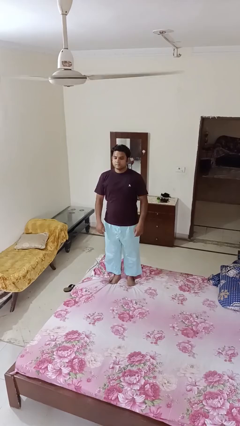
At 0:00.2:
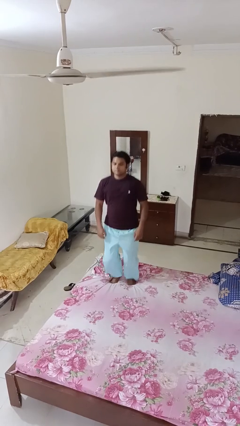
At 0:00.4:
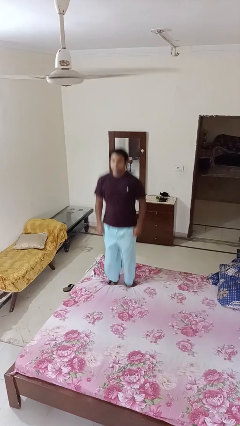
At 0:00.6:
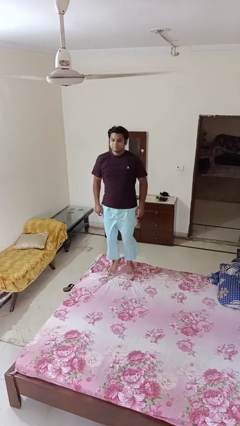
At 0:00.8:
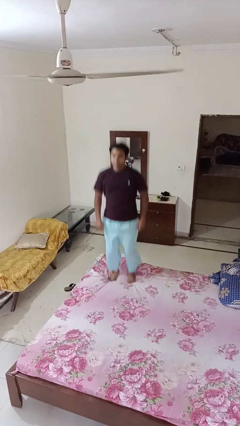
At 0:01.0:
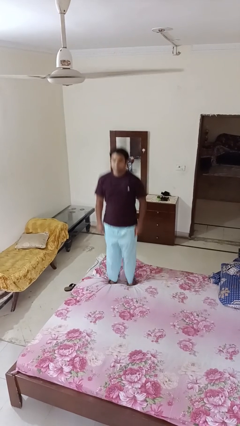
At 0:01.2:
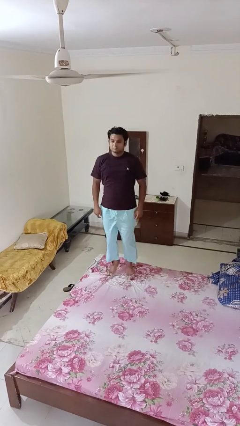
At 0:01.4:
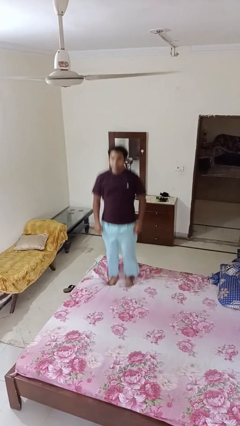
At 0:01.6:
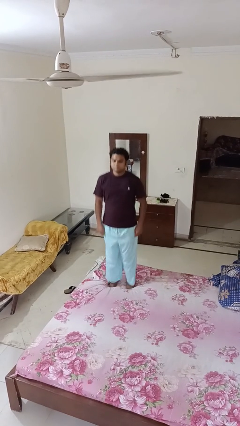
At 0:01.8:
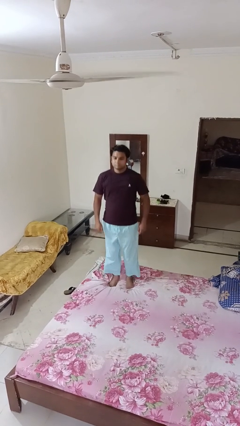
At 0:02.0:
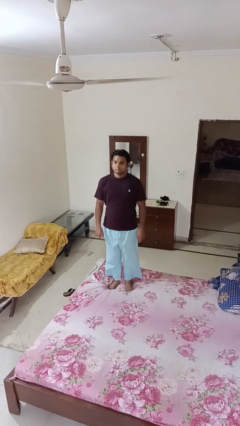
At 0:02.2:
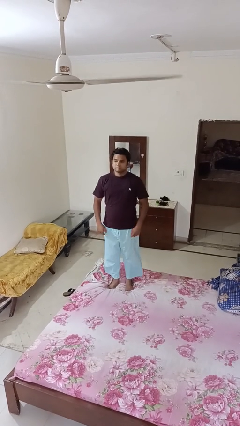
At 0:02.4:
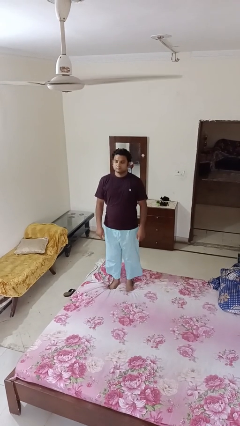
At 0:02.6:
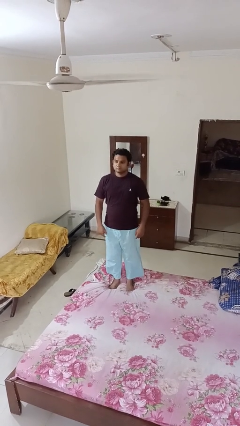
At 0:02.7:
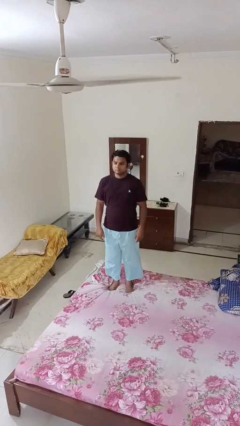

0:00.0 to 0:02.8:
person jumps on bed

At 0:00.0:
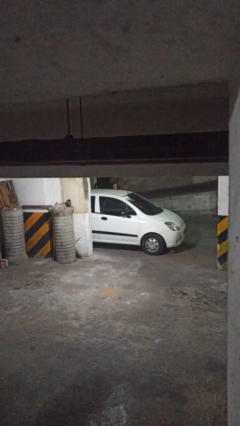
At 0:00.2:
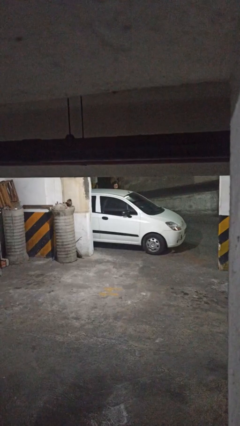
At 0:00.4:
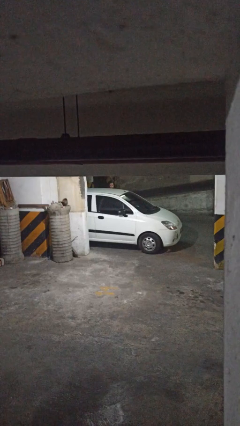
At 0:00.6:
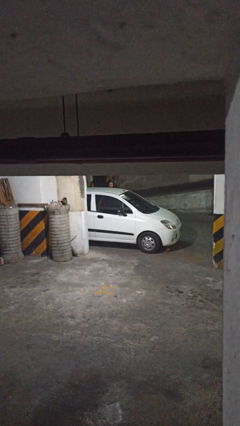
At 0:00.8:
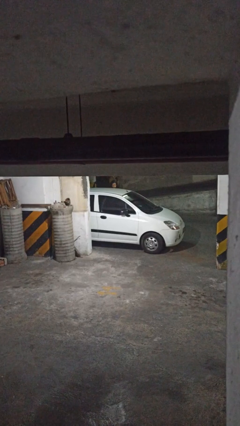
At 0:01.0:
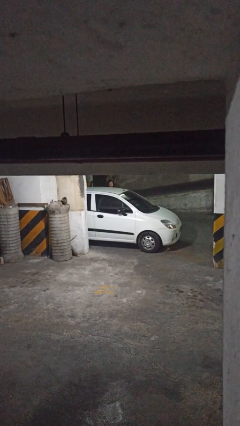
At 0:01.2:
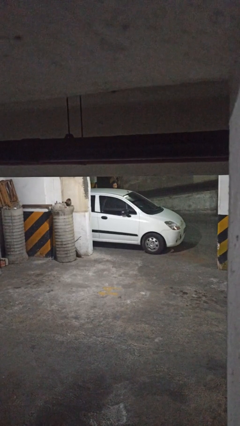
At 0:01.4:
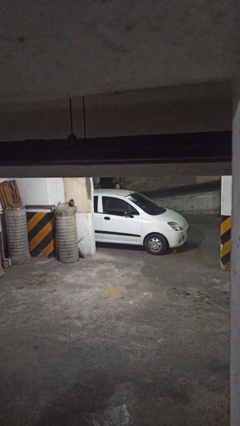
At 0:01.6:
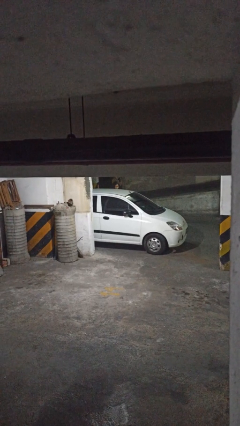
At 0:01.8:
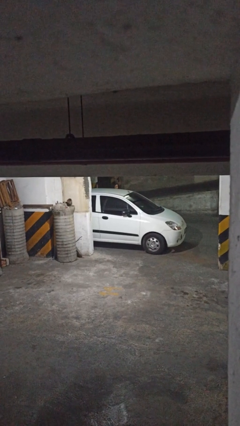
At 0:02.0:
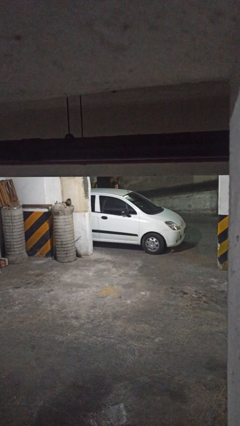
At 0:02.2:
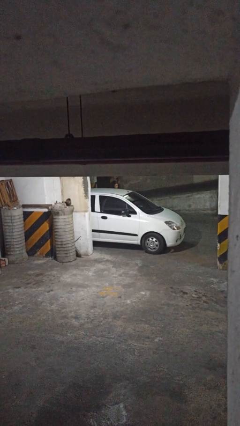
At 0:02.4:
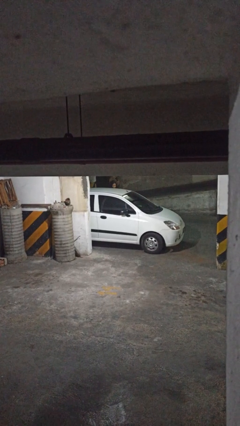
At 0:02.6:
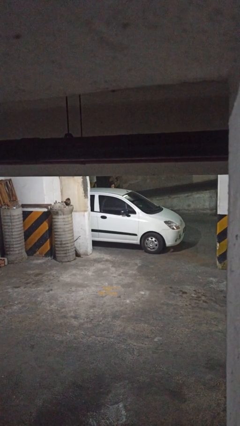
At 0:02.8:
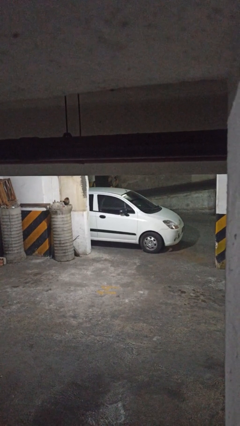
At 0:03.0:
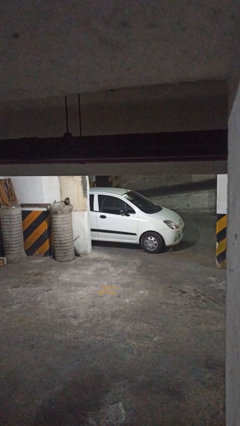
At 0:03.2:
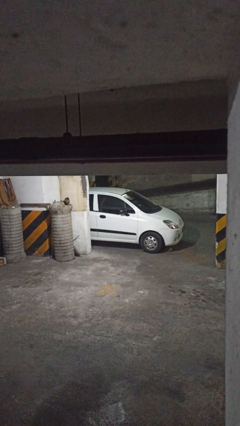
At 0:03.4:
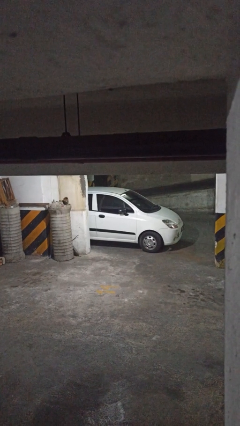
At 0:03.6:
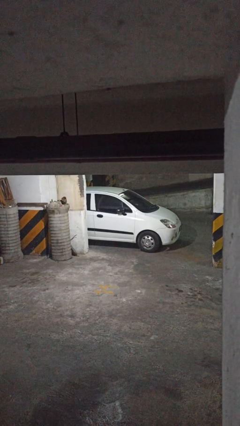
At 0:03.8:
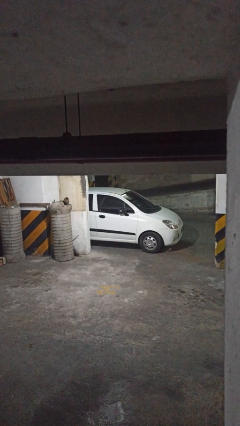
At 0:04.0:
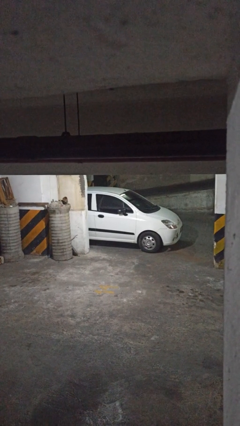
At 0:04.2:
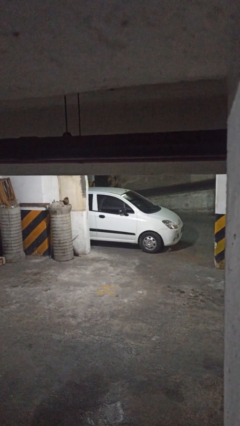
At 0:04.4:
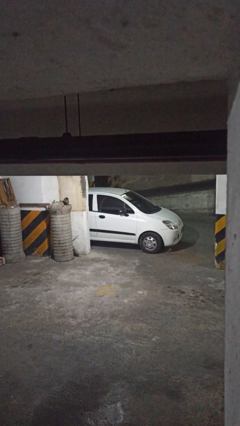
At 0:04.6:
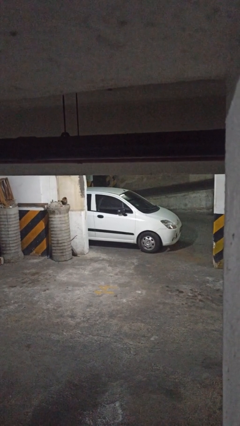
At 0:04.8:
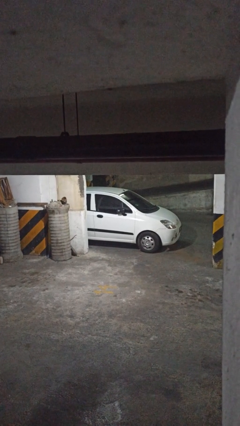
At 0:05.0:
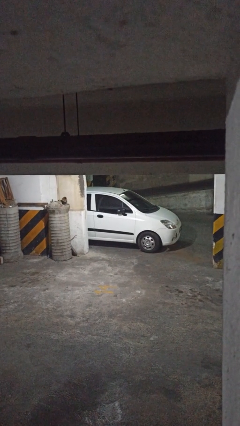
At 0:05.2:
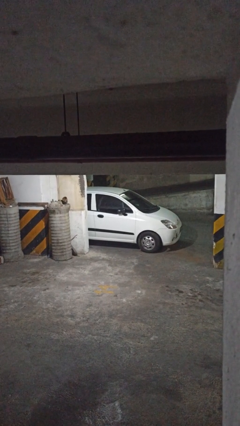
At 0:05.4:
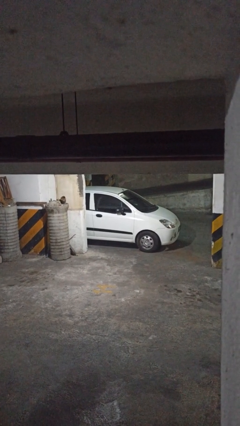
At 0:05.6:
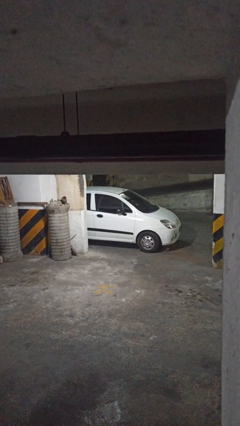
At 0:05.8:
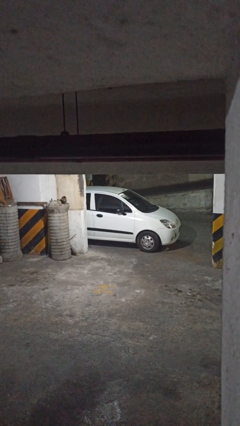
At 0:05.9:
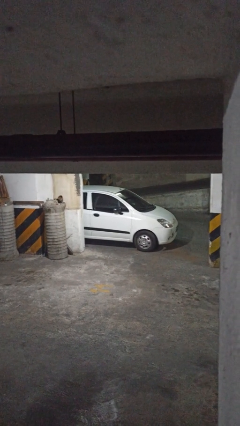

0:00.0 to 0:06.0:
car picks up person

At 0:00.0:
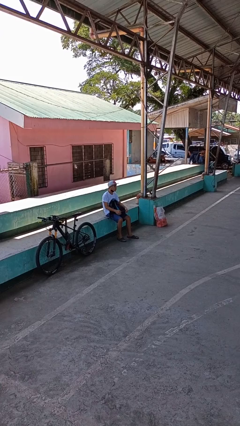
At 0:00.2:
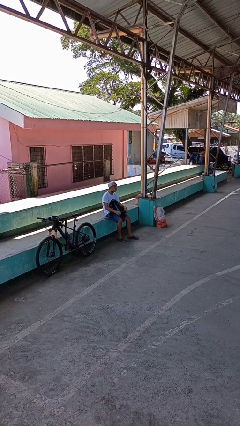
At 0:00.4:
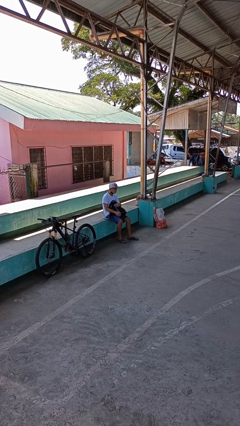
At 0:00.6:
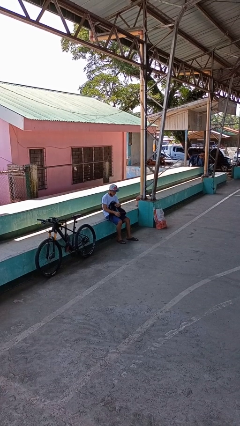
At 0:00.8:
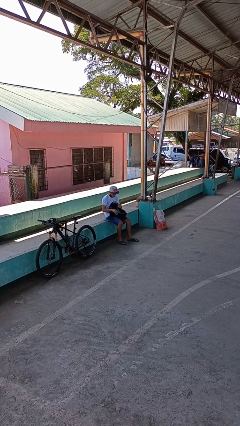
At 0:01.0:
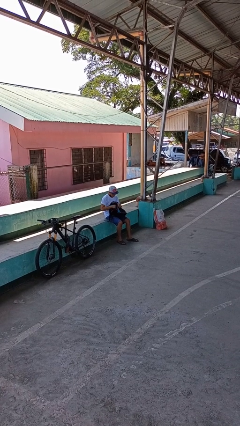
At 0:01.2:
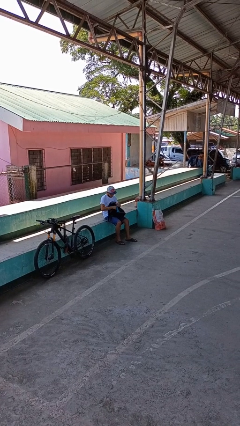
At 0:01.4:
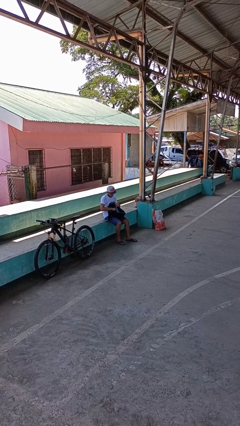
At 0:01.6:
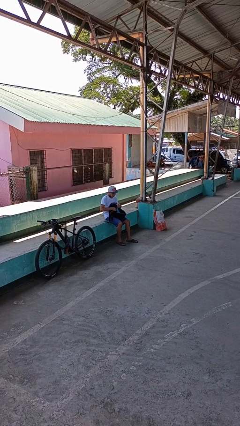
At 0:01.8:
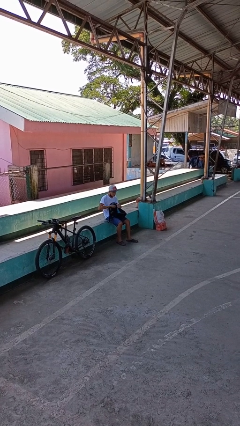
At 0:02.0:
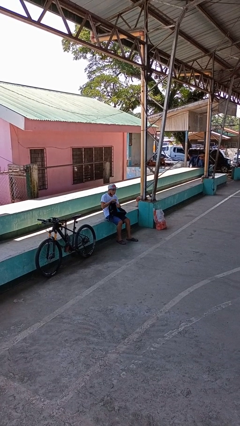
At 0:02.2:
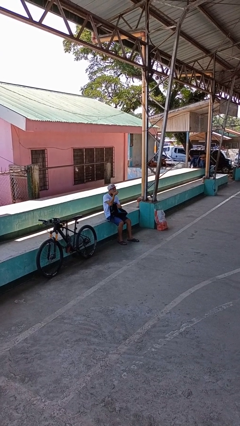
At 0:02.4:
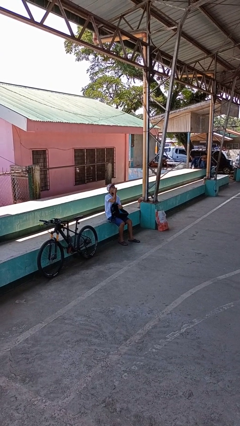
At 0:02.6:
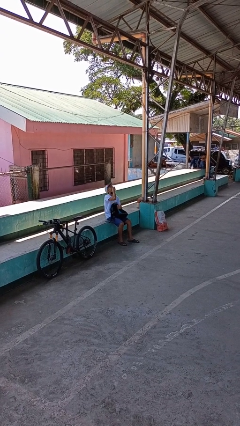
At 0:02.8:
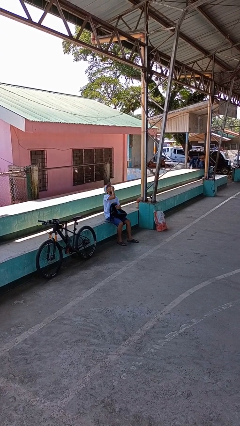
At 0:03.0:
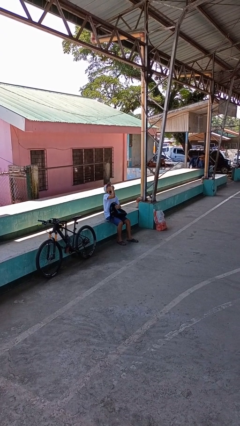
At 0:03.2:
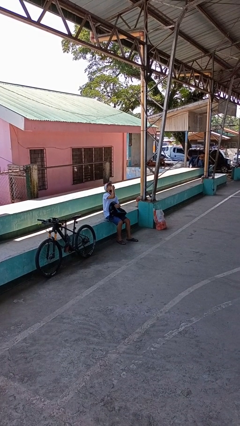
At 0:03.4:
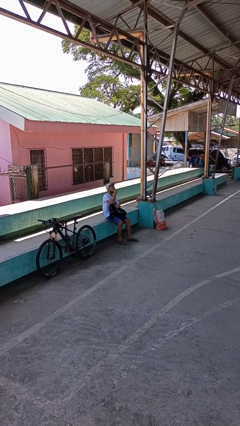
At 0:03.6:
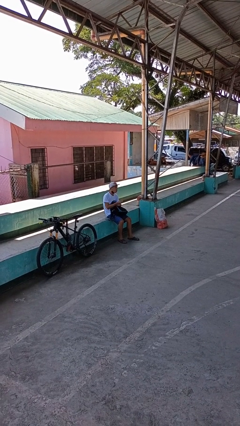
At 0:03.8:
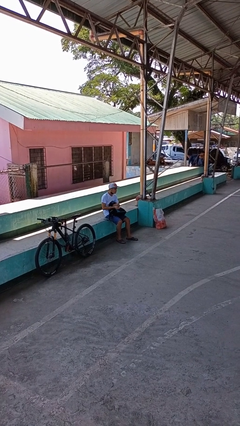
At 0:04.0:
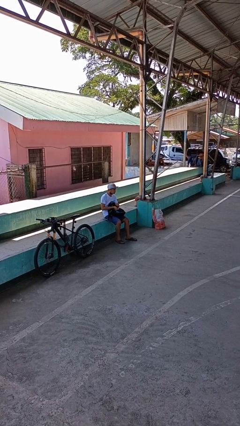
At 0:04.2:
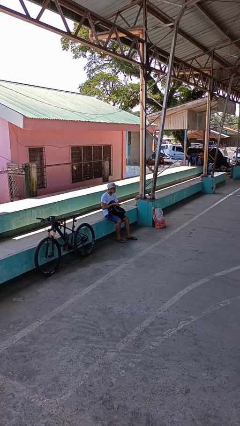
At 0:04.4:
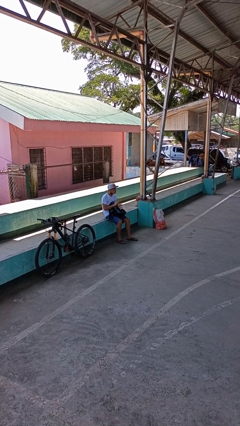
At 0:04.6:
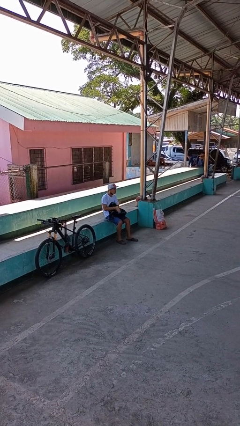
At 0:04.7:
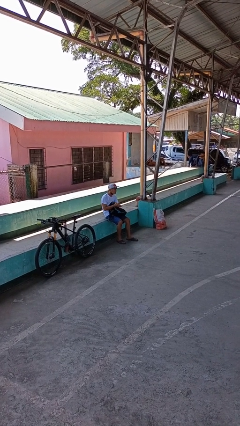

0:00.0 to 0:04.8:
person eats snack from bag

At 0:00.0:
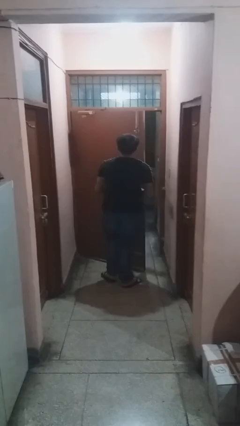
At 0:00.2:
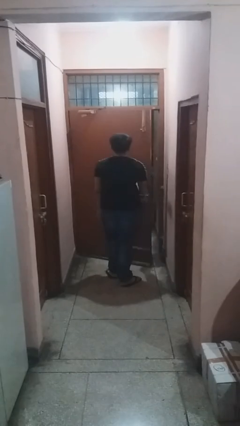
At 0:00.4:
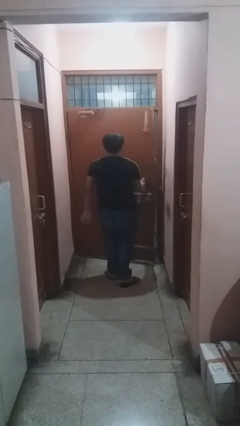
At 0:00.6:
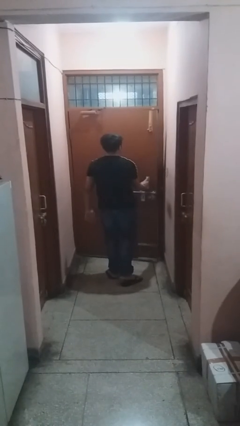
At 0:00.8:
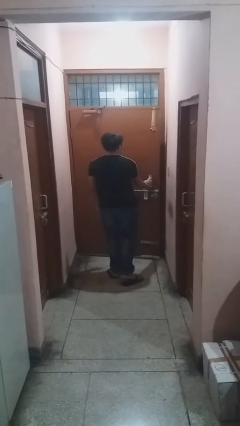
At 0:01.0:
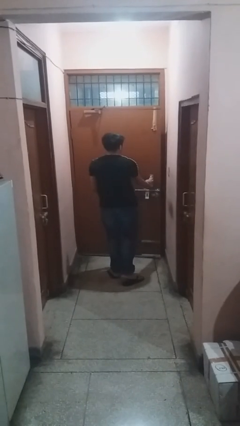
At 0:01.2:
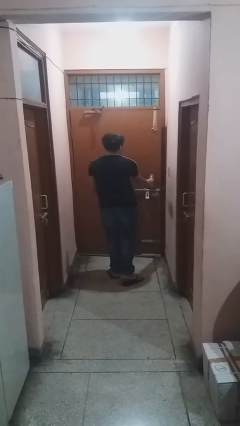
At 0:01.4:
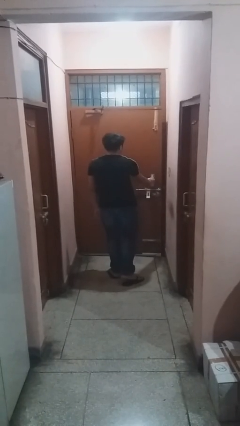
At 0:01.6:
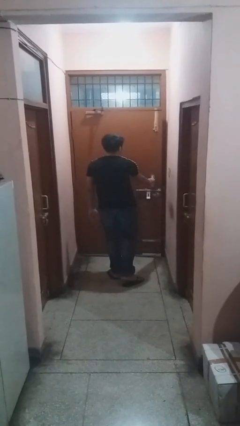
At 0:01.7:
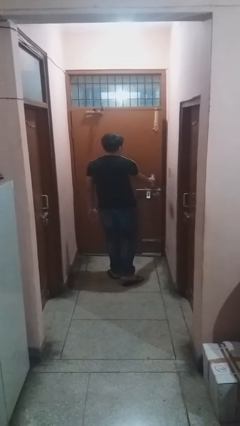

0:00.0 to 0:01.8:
person closes facility door

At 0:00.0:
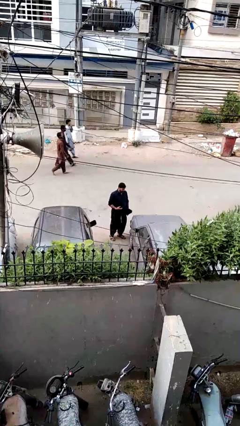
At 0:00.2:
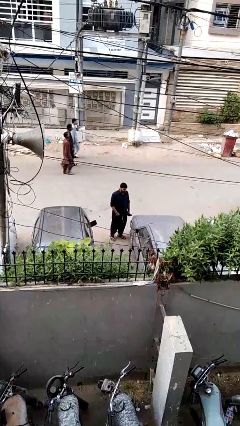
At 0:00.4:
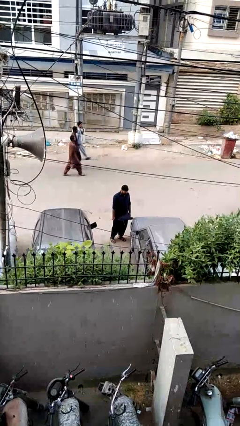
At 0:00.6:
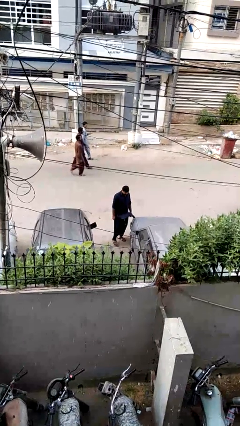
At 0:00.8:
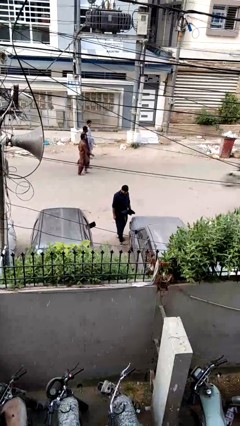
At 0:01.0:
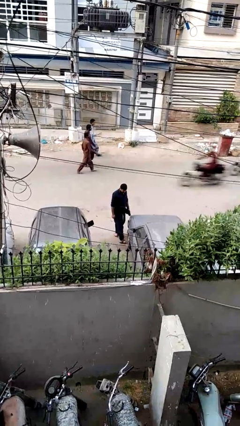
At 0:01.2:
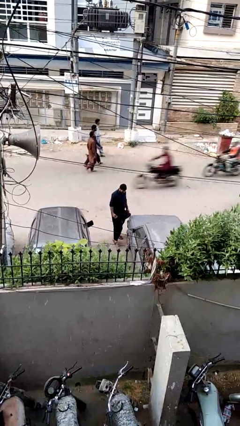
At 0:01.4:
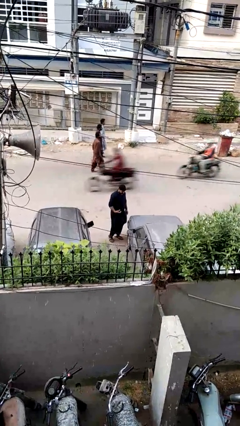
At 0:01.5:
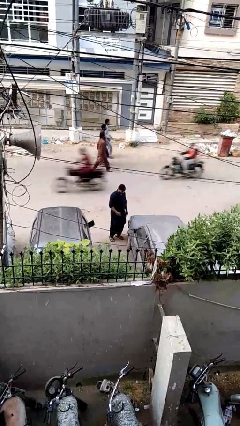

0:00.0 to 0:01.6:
person kicks car tires

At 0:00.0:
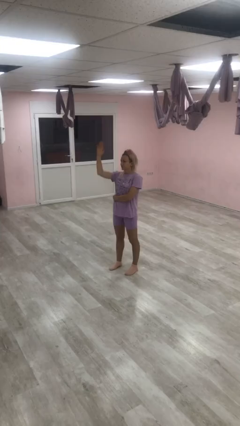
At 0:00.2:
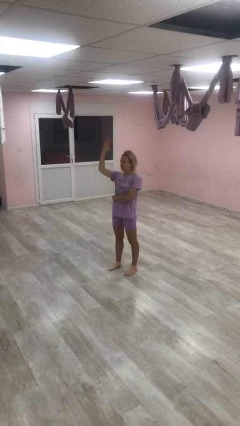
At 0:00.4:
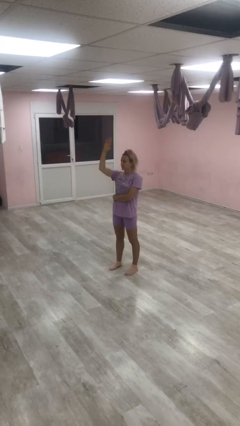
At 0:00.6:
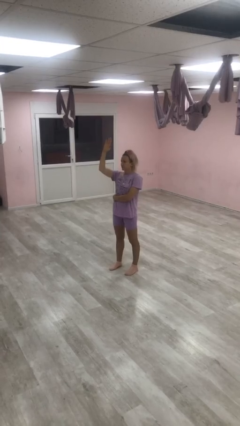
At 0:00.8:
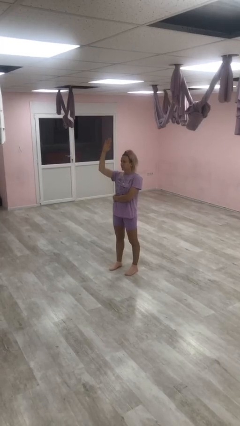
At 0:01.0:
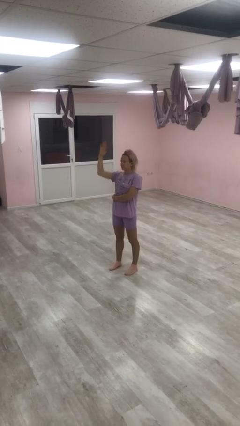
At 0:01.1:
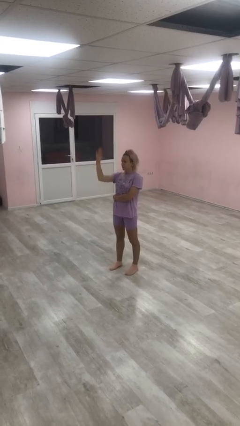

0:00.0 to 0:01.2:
person gestures raise hand
